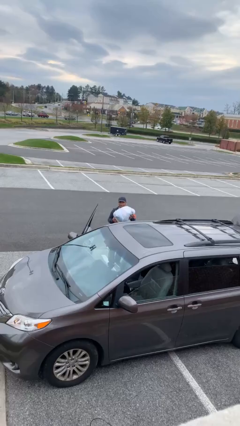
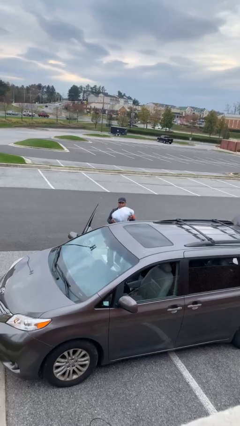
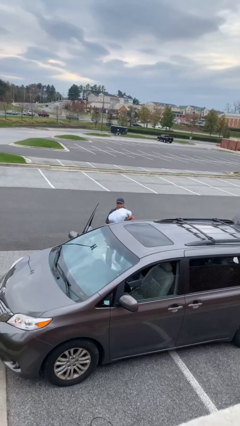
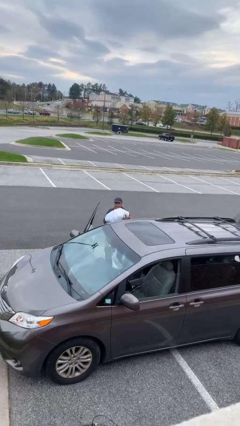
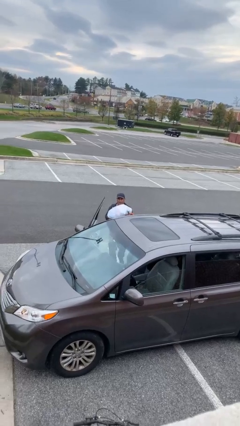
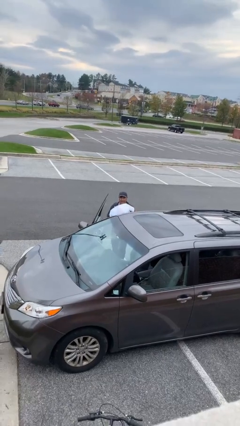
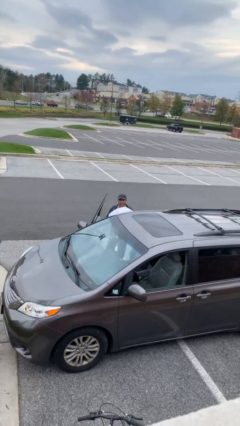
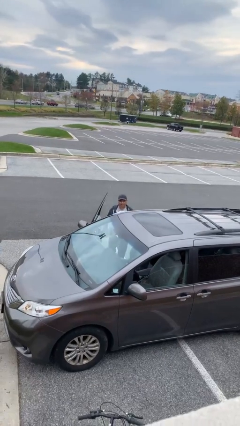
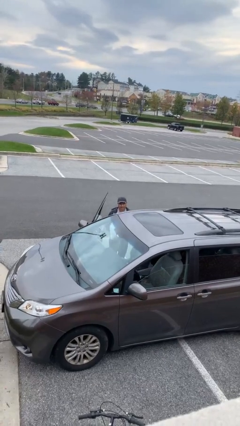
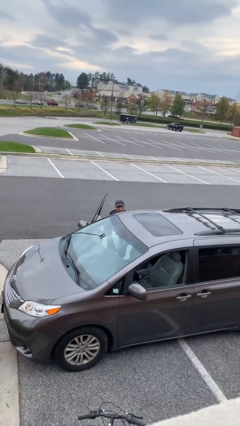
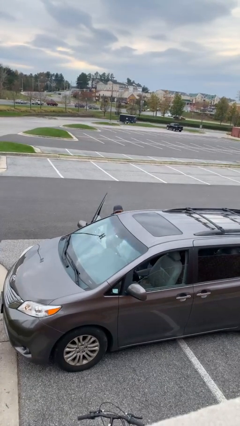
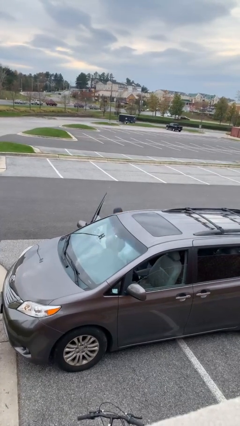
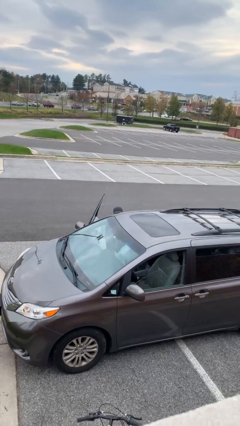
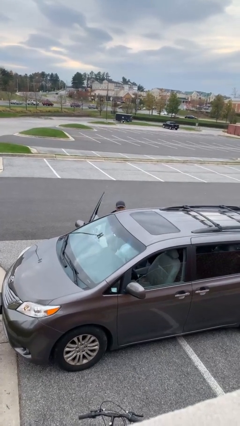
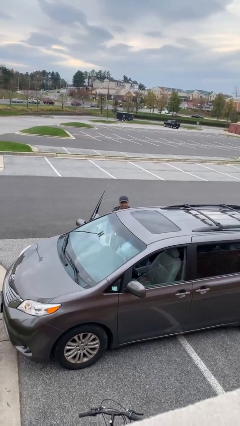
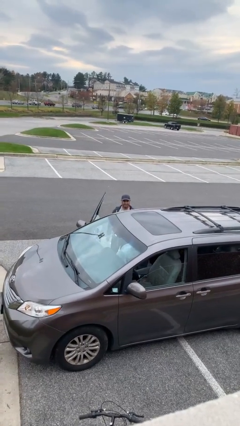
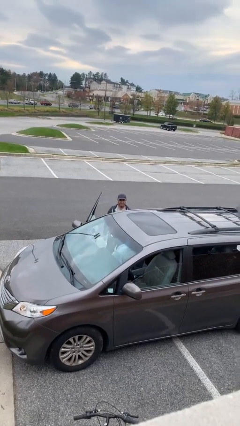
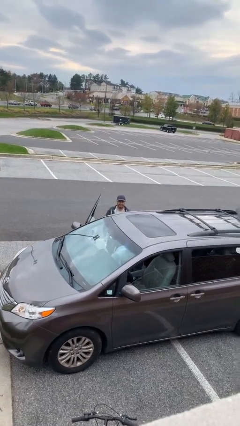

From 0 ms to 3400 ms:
person loads car

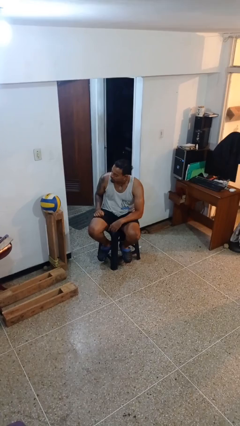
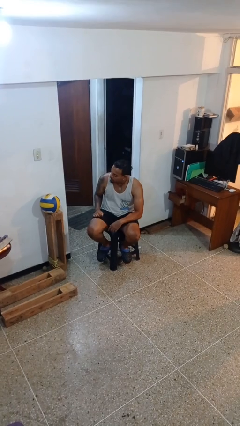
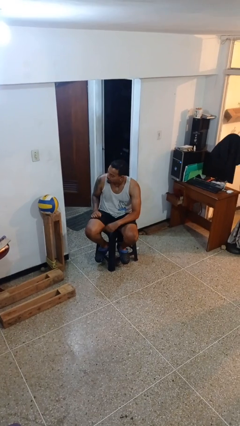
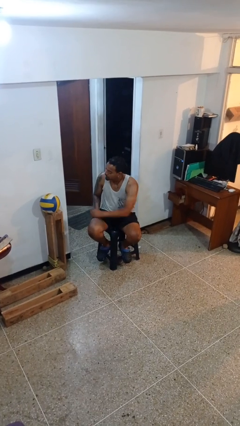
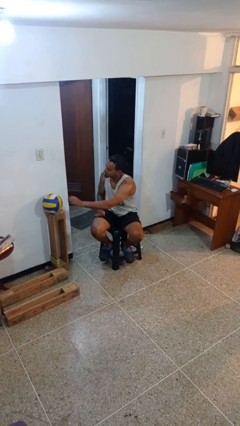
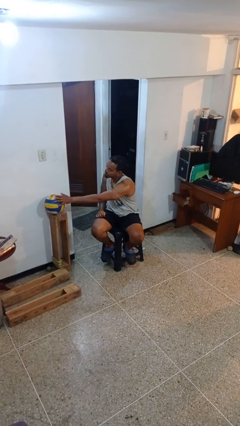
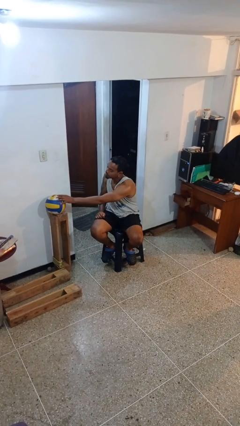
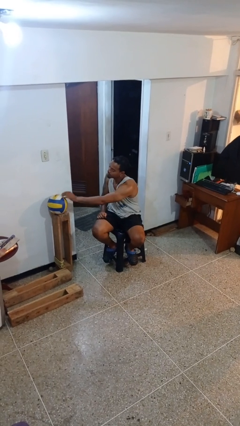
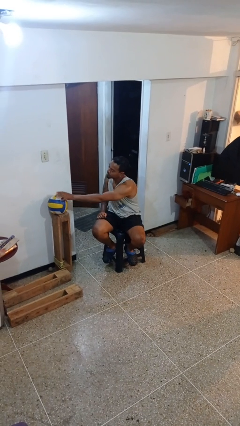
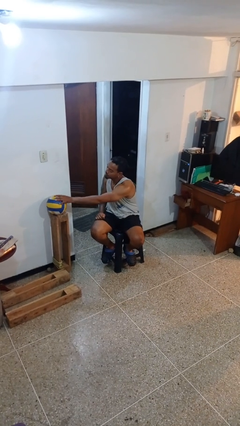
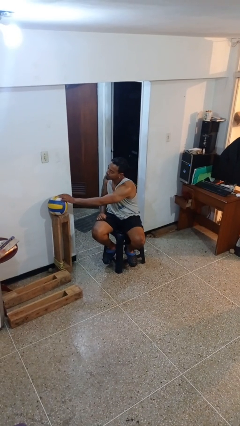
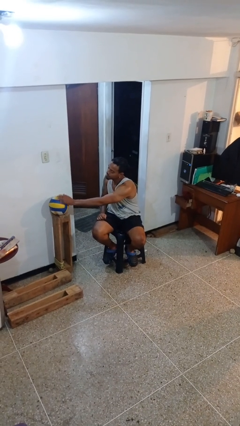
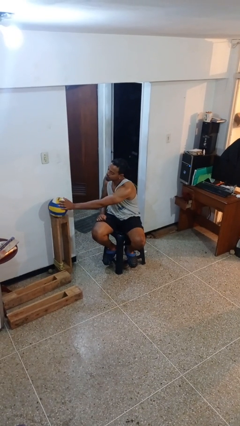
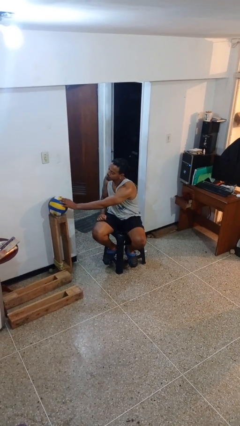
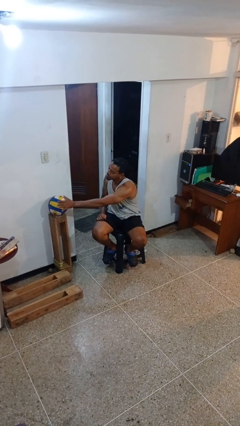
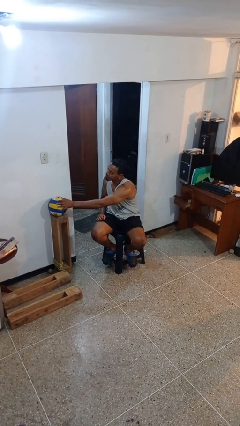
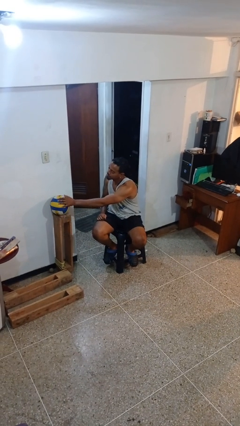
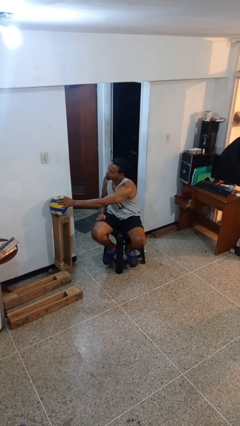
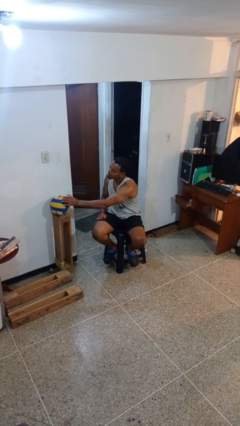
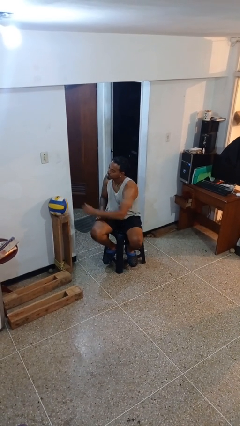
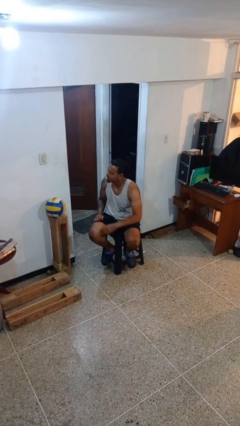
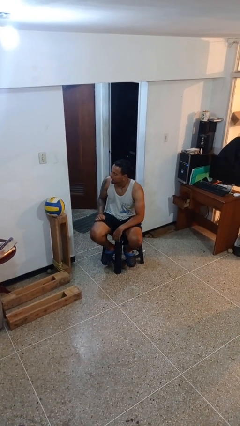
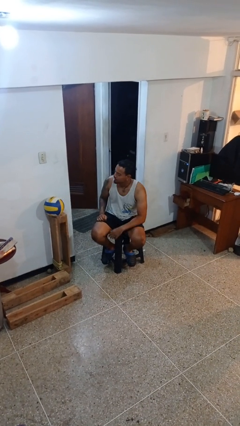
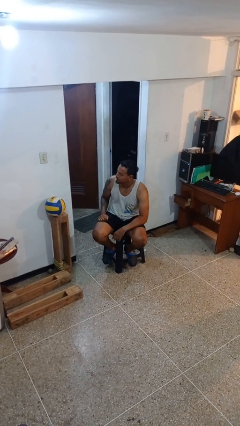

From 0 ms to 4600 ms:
person waves hand over object

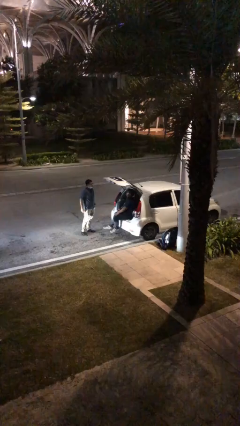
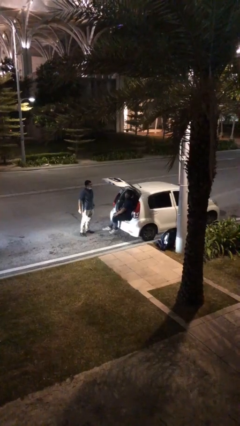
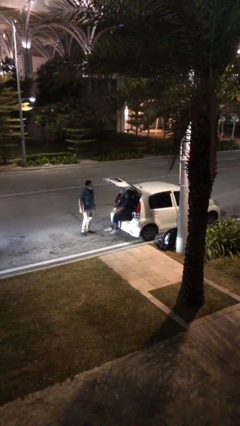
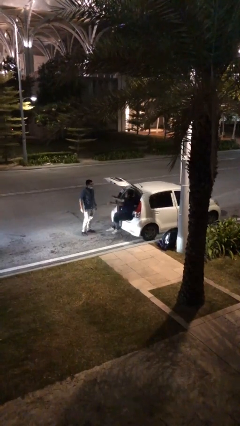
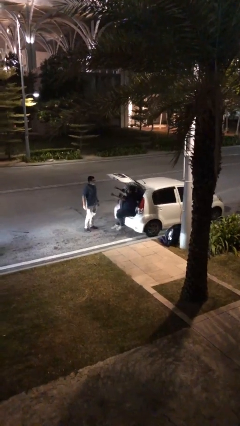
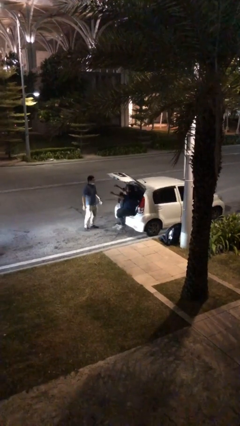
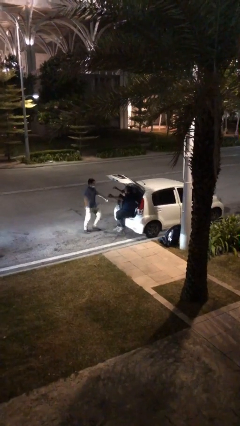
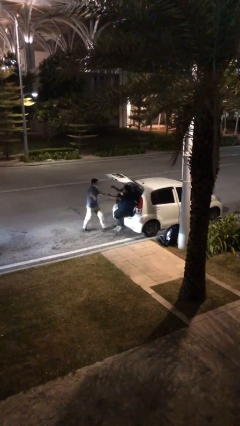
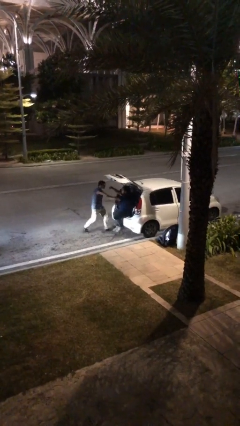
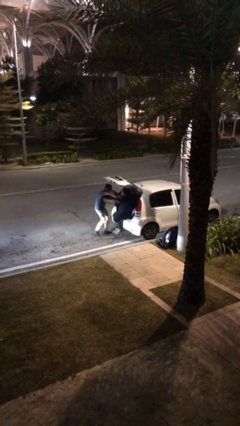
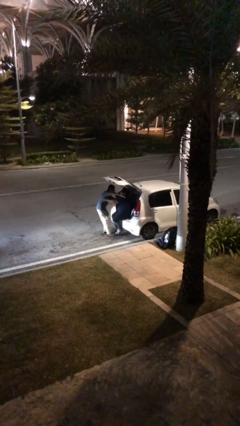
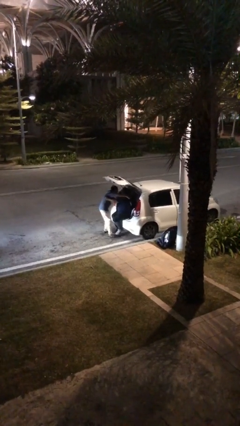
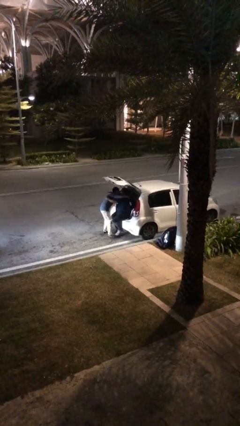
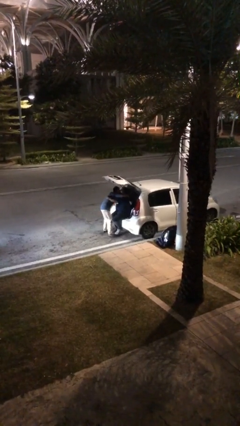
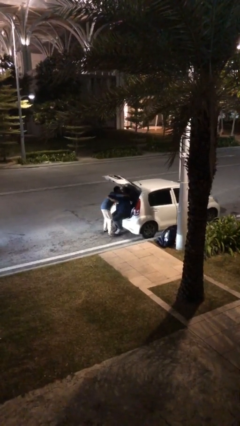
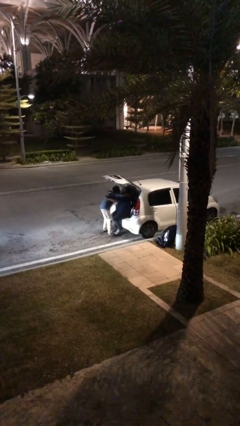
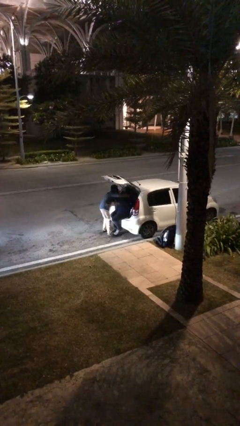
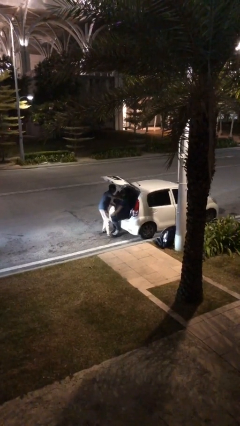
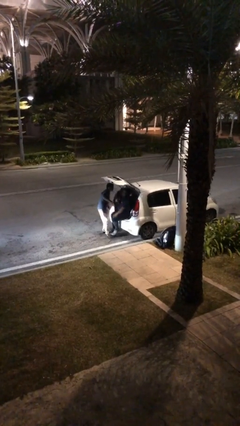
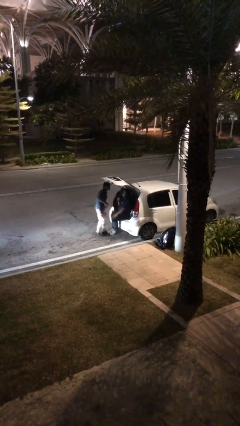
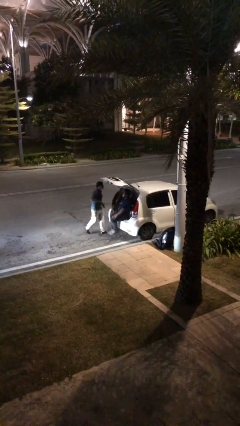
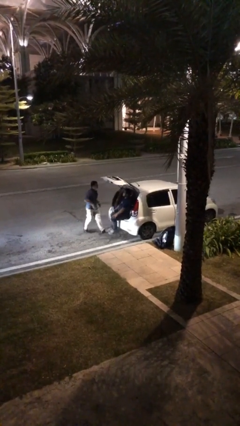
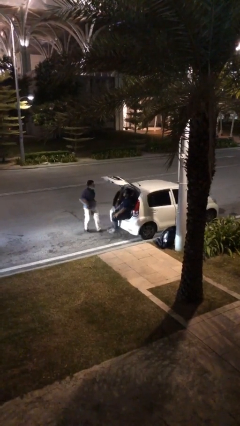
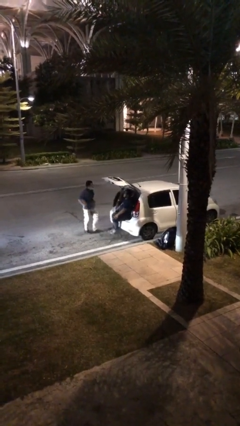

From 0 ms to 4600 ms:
person embraces person

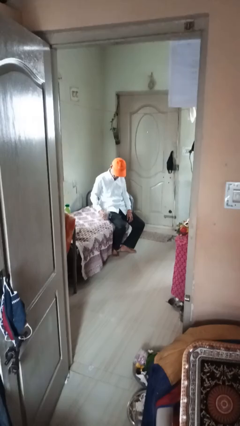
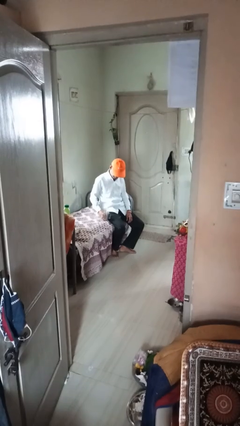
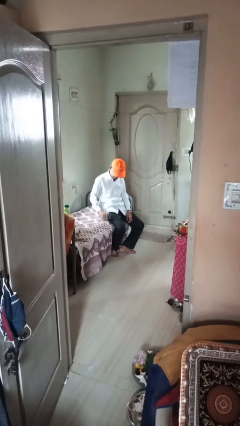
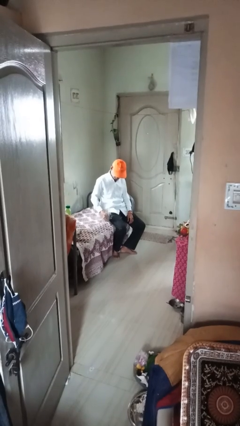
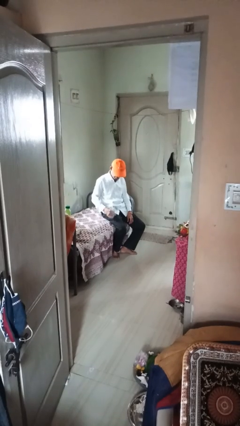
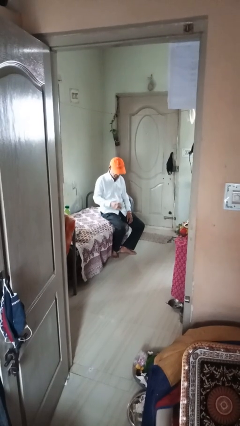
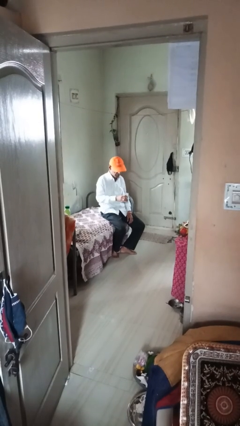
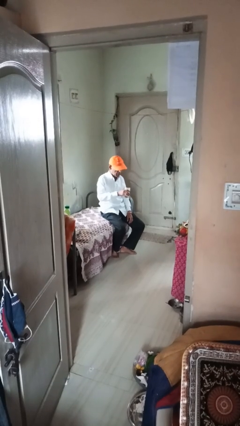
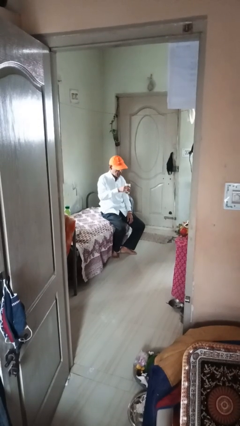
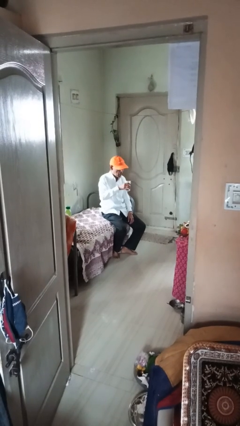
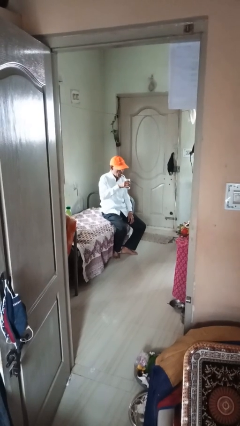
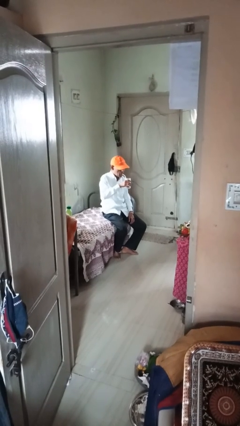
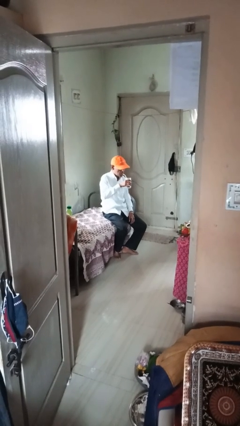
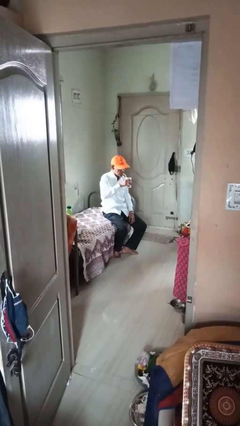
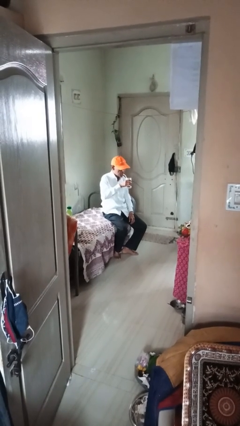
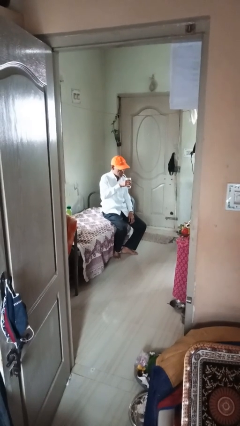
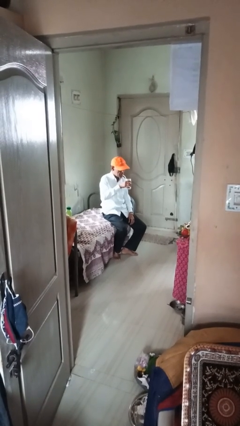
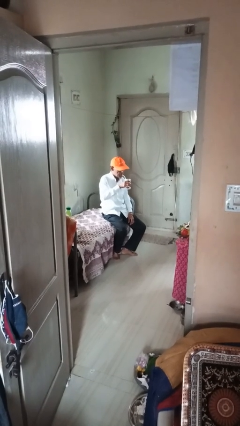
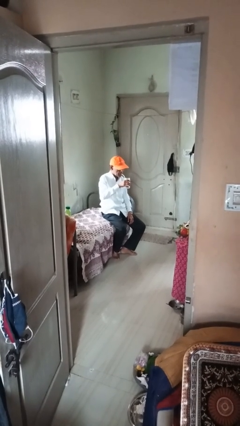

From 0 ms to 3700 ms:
person drinks from straw

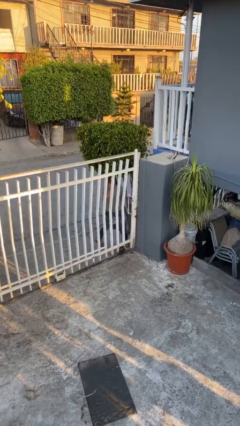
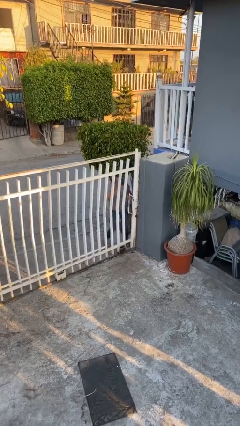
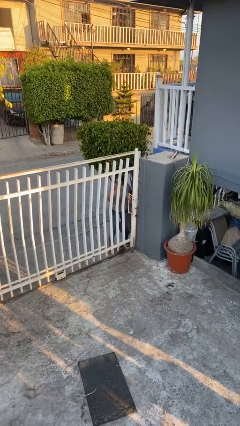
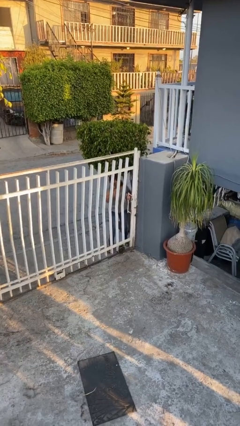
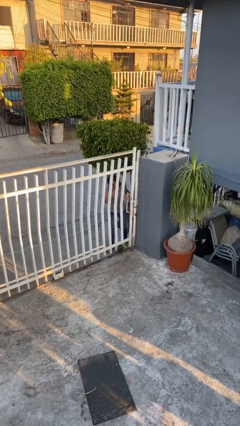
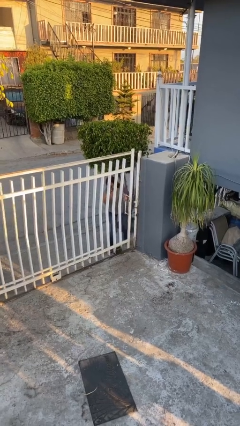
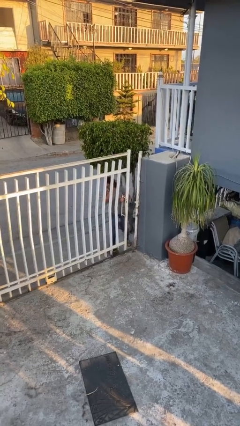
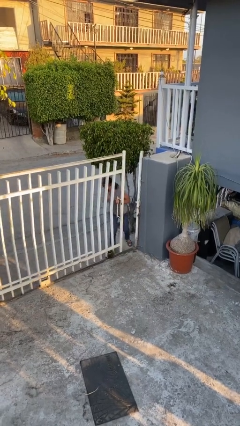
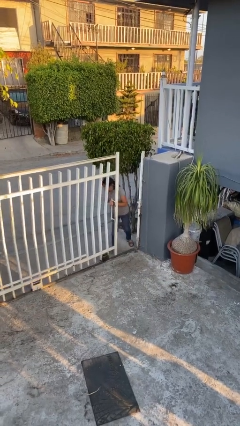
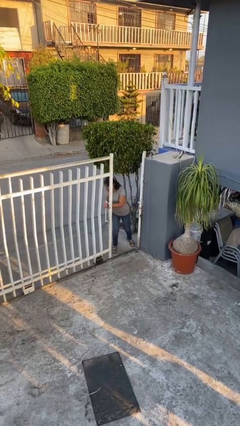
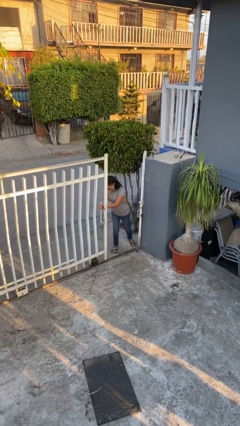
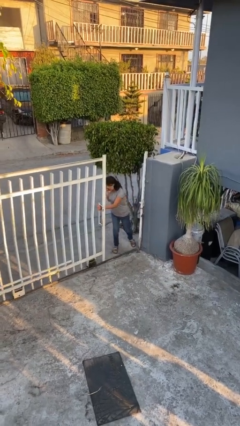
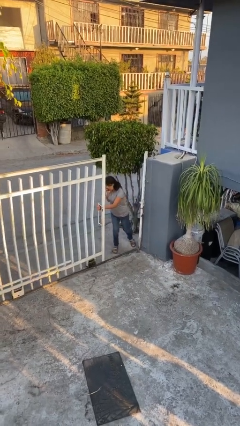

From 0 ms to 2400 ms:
person opens facility door
